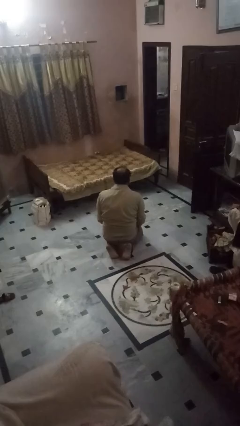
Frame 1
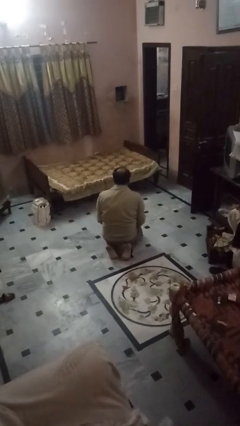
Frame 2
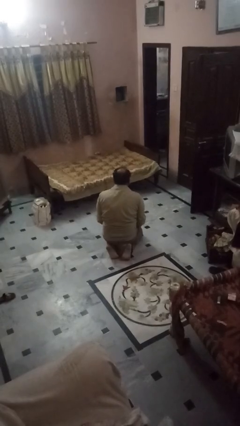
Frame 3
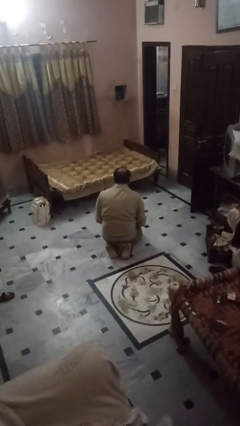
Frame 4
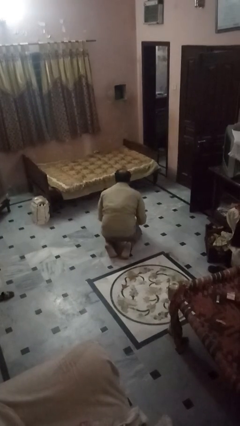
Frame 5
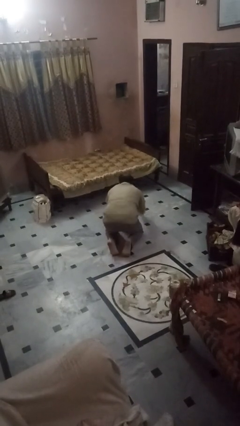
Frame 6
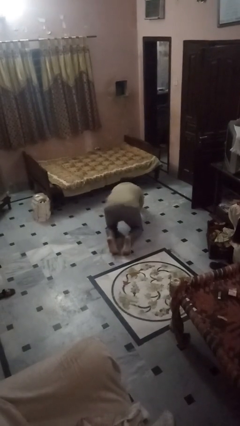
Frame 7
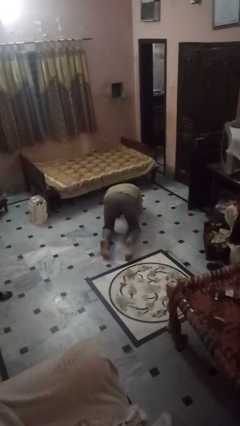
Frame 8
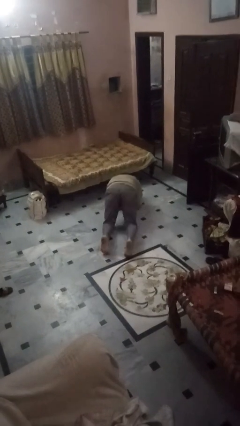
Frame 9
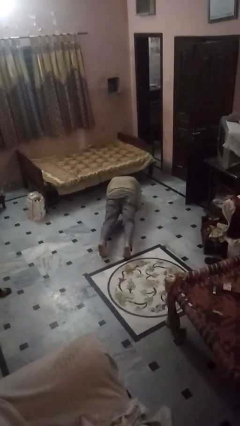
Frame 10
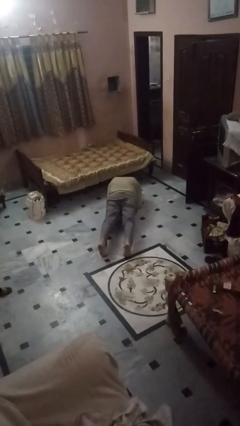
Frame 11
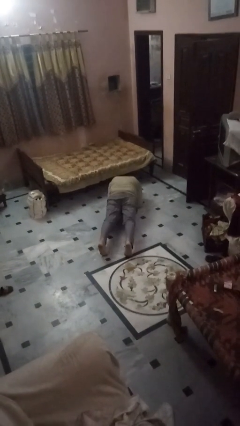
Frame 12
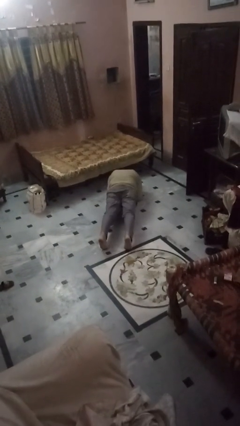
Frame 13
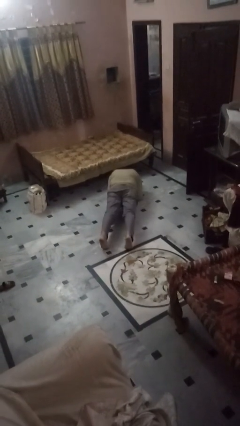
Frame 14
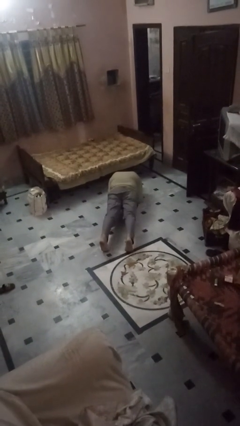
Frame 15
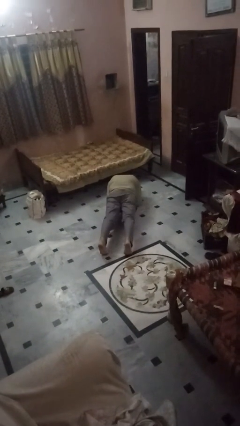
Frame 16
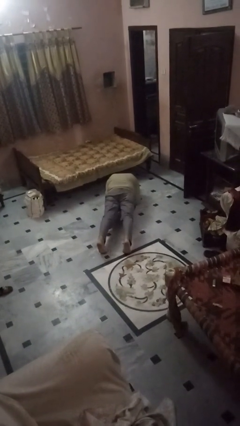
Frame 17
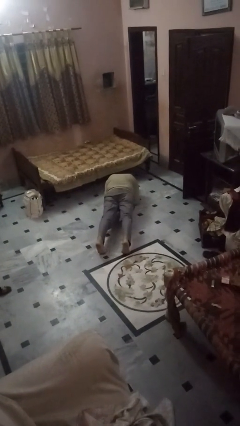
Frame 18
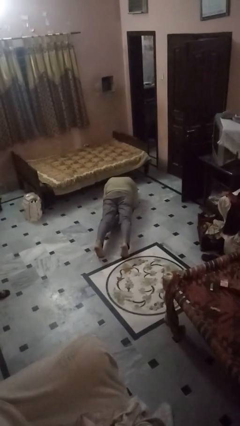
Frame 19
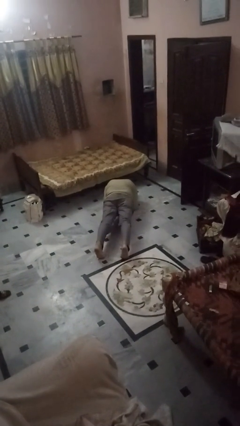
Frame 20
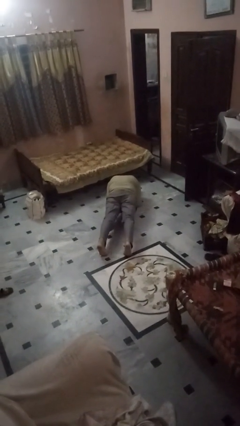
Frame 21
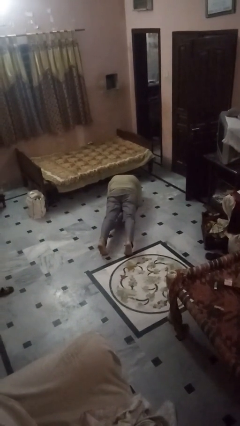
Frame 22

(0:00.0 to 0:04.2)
person exercises with plank

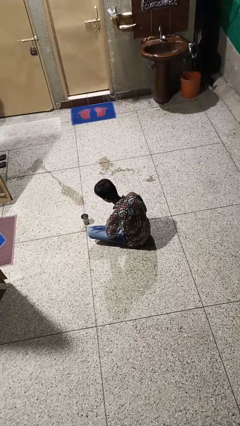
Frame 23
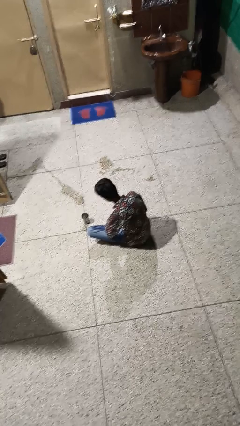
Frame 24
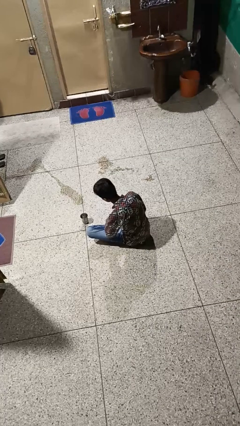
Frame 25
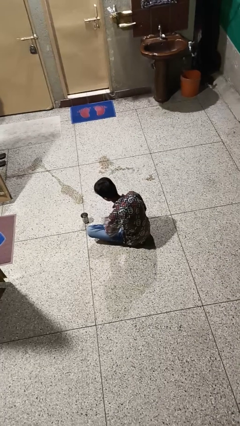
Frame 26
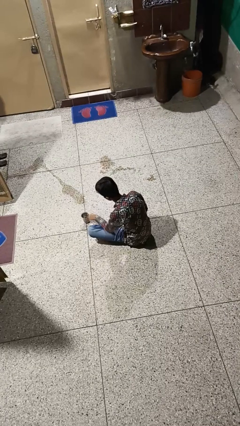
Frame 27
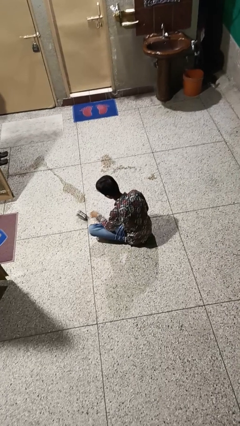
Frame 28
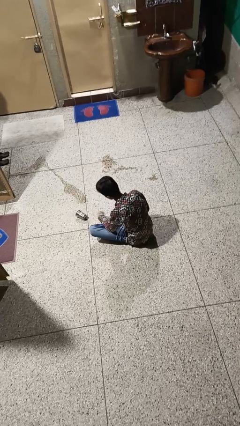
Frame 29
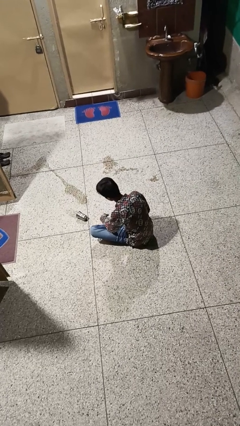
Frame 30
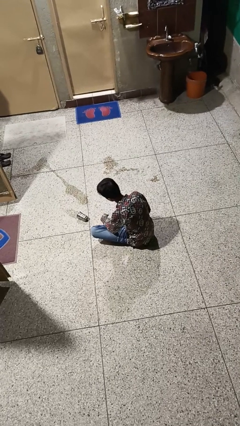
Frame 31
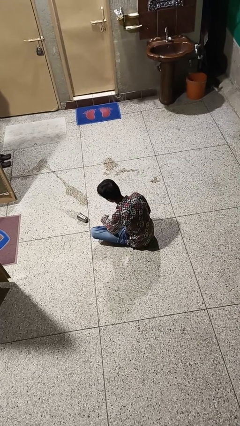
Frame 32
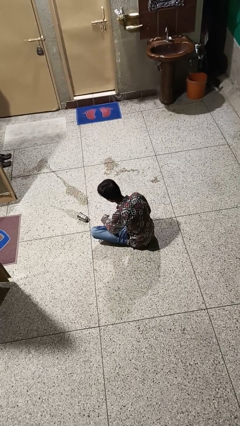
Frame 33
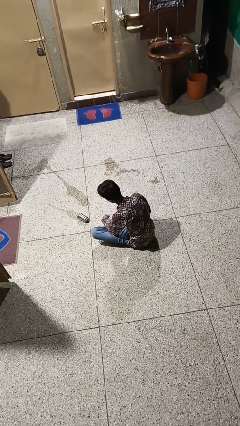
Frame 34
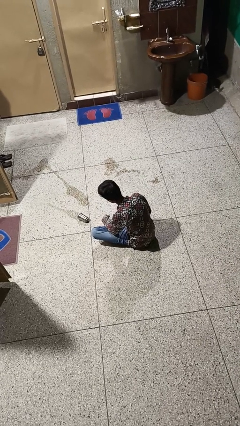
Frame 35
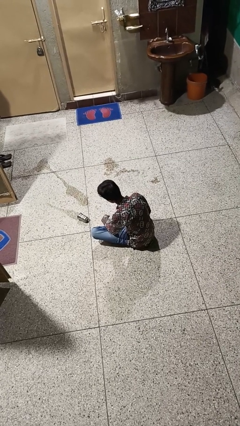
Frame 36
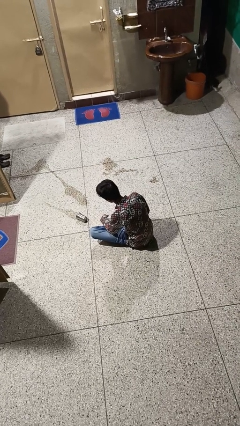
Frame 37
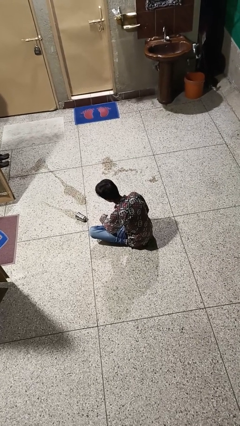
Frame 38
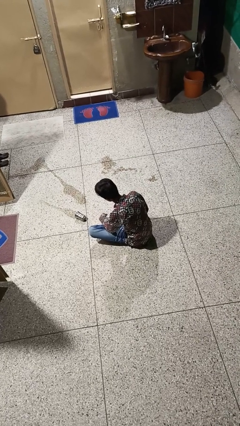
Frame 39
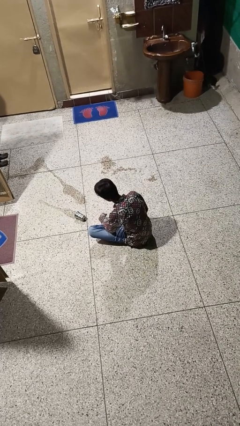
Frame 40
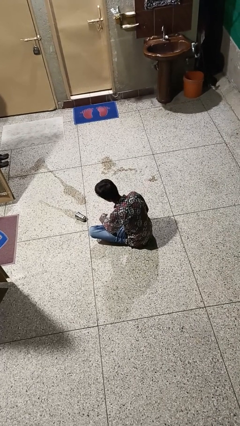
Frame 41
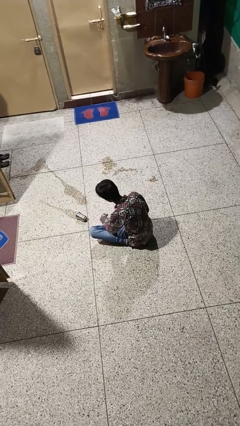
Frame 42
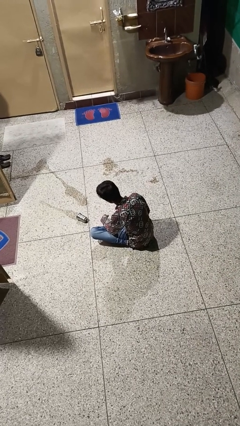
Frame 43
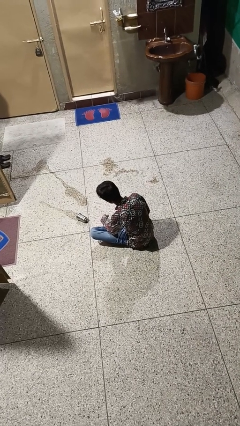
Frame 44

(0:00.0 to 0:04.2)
person spills on floor

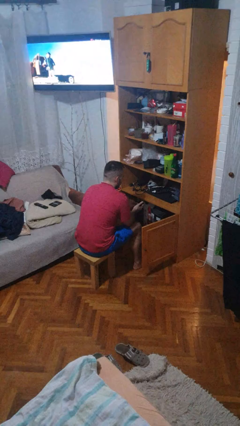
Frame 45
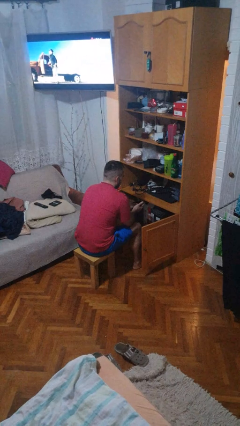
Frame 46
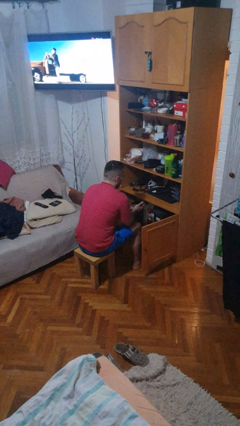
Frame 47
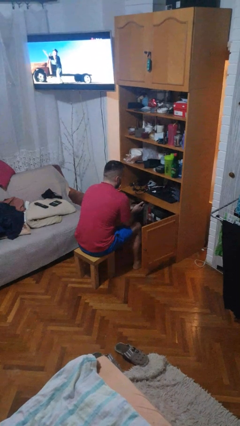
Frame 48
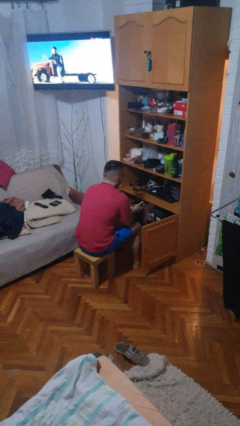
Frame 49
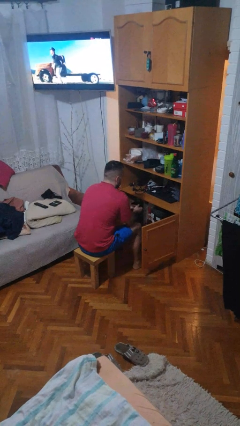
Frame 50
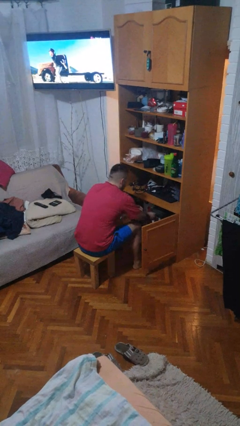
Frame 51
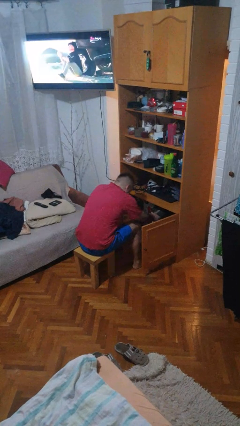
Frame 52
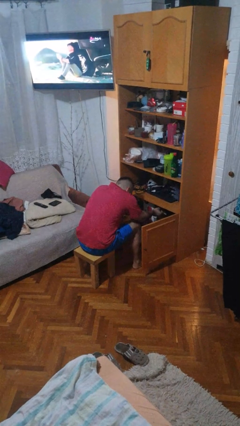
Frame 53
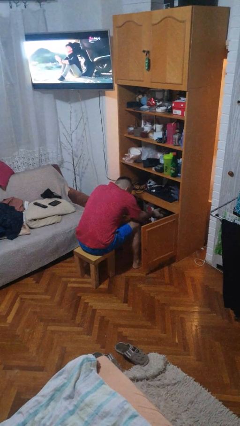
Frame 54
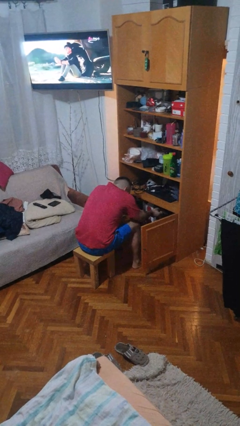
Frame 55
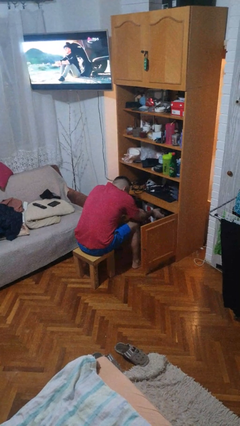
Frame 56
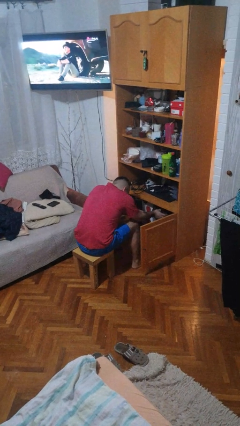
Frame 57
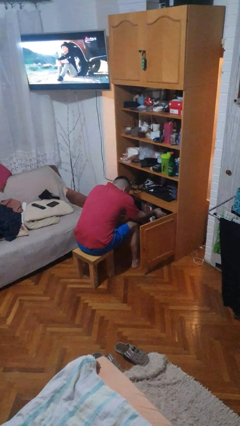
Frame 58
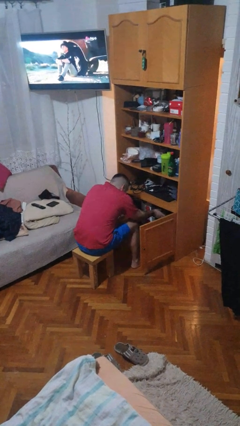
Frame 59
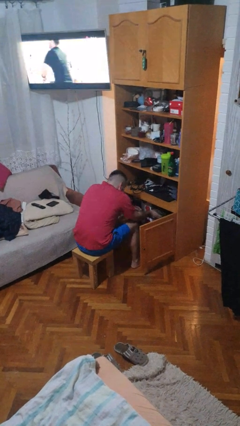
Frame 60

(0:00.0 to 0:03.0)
person searches in cabinet

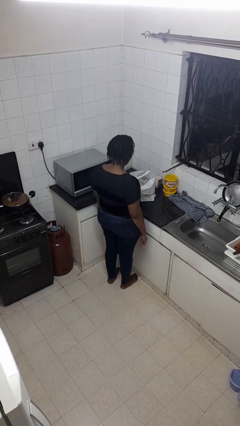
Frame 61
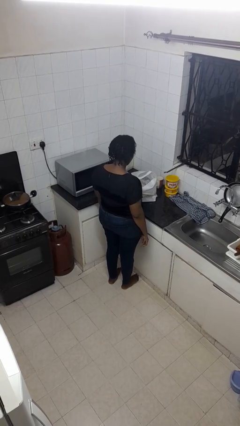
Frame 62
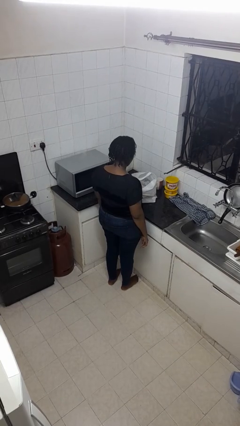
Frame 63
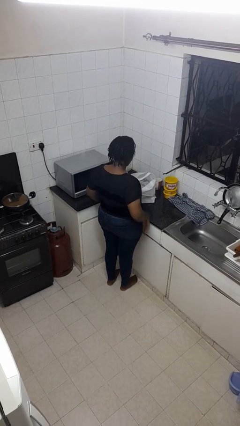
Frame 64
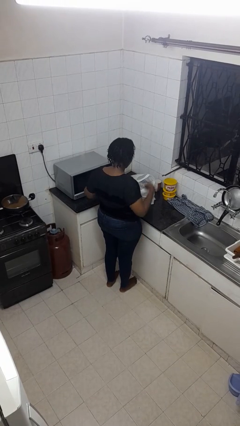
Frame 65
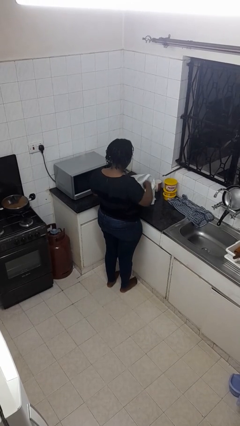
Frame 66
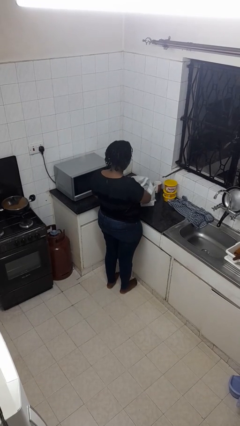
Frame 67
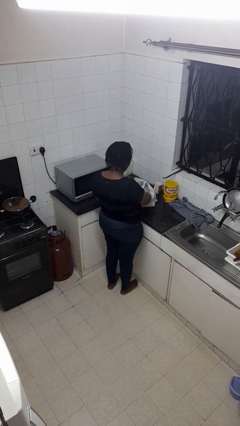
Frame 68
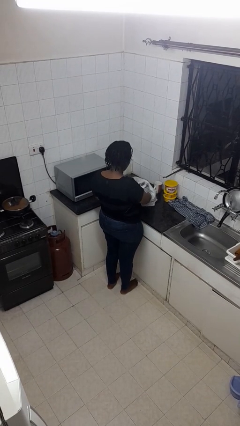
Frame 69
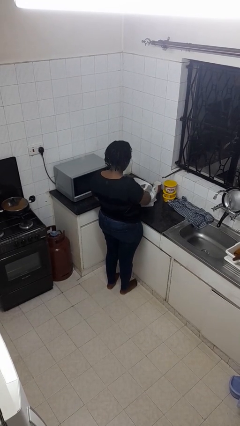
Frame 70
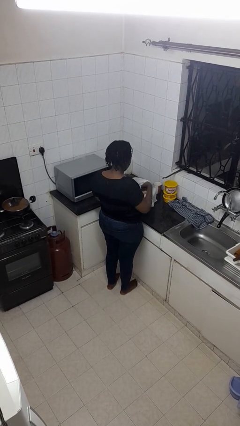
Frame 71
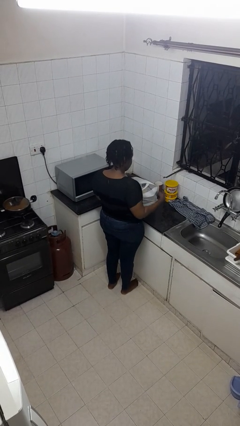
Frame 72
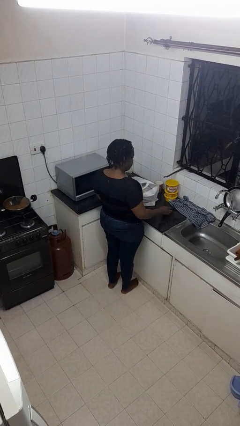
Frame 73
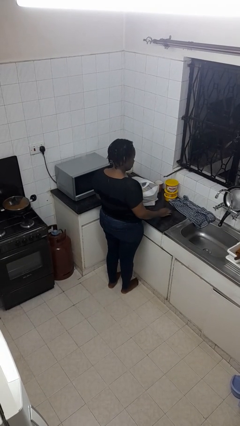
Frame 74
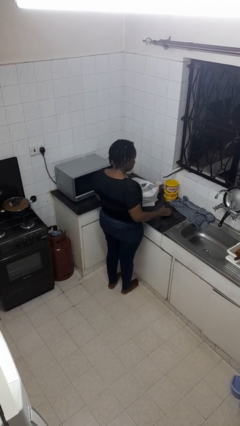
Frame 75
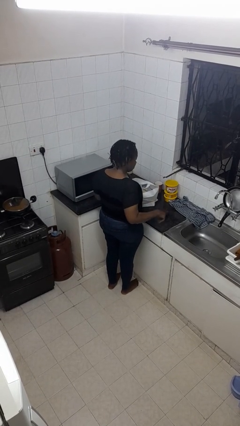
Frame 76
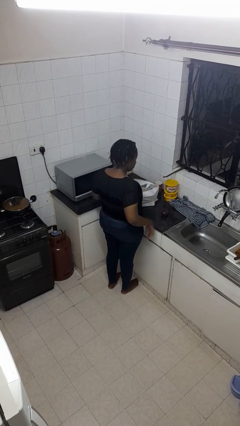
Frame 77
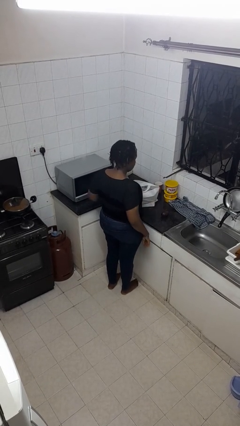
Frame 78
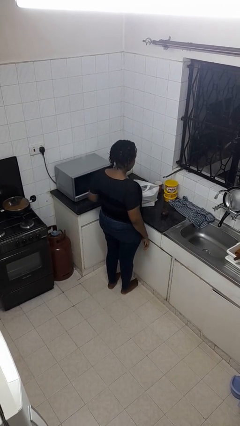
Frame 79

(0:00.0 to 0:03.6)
person takes object from bag

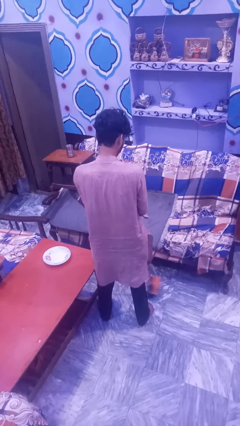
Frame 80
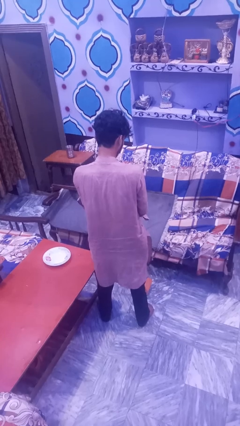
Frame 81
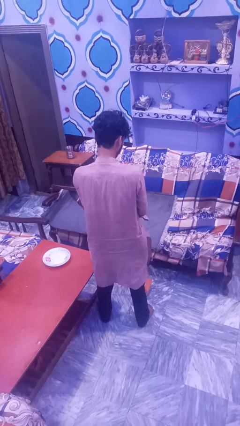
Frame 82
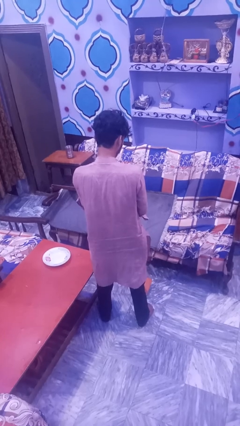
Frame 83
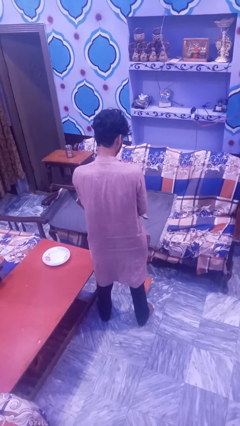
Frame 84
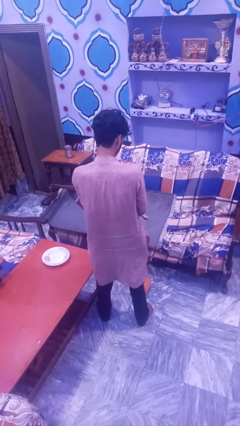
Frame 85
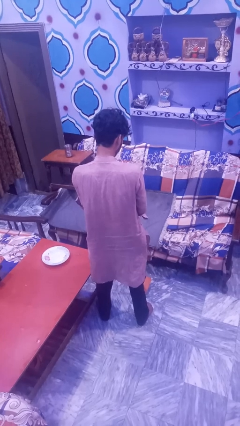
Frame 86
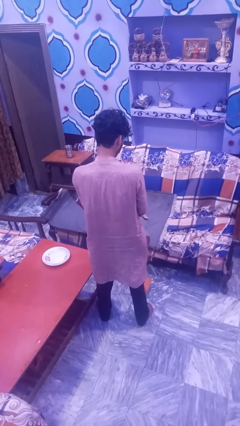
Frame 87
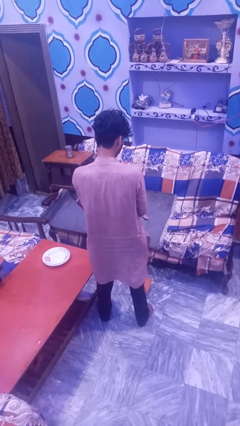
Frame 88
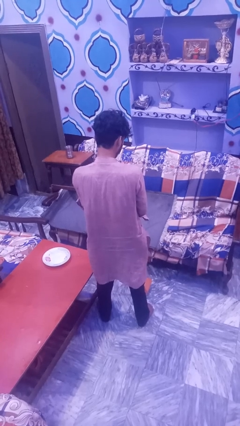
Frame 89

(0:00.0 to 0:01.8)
person mops

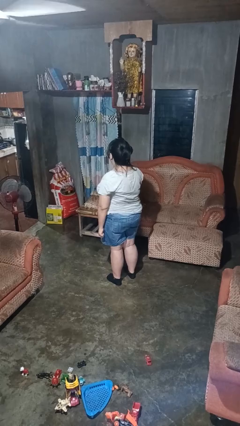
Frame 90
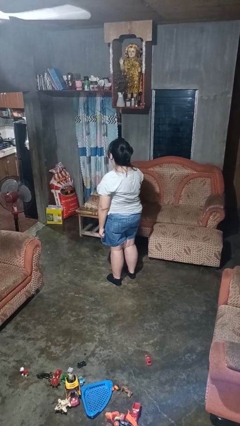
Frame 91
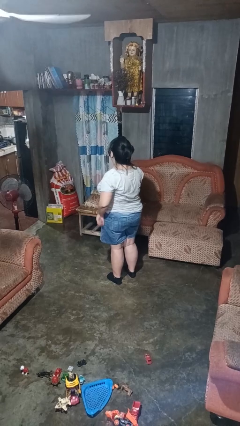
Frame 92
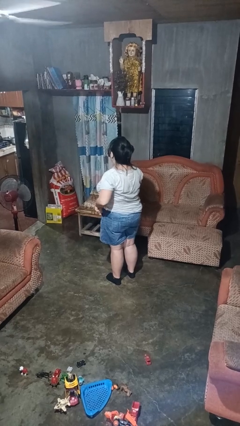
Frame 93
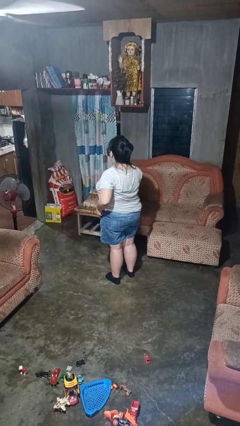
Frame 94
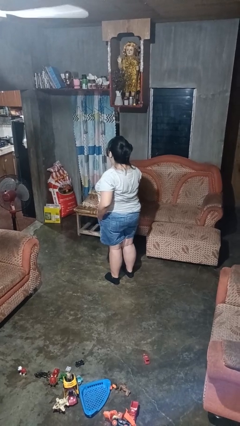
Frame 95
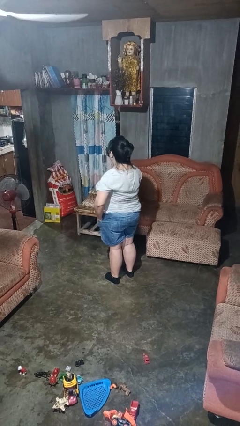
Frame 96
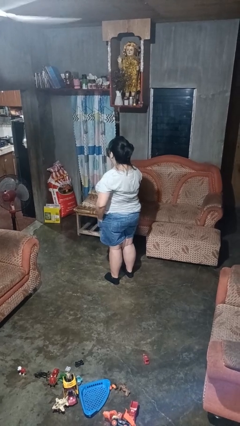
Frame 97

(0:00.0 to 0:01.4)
person puts hands in back pockets
